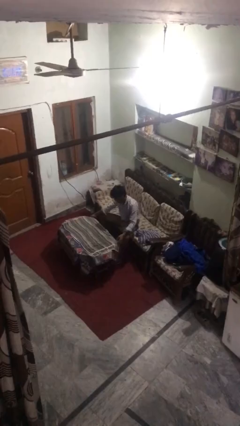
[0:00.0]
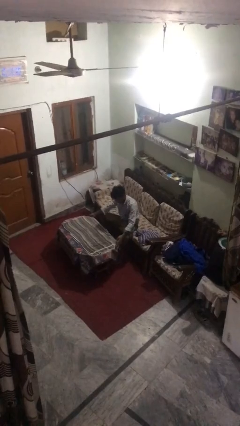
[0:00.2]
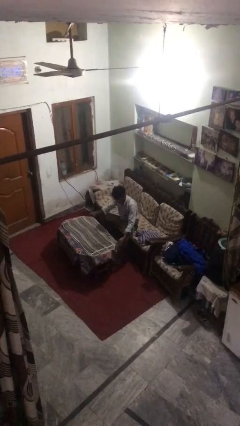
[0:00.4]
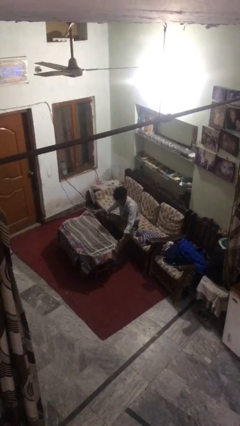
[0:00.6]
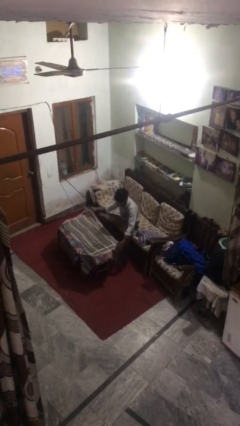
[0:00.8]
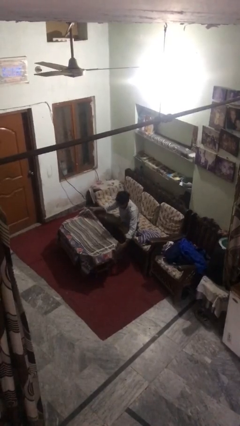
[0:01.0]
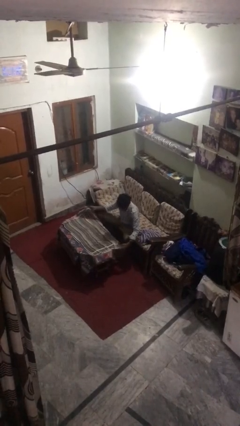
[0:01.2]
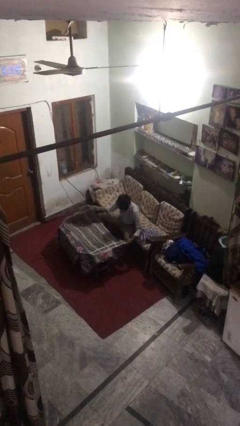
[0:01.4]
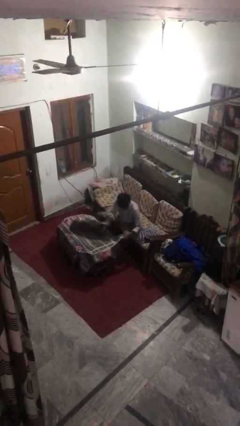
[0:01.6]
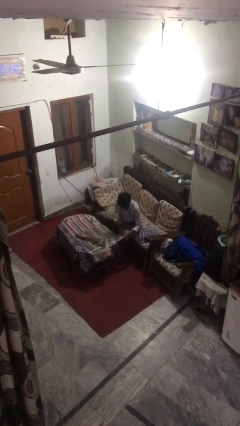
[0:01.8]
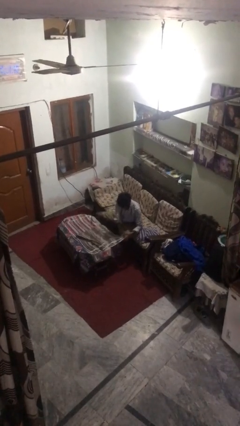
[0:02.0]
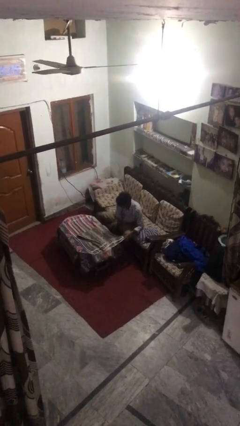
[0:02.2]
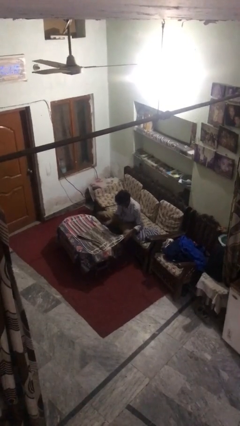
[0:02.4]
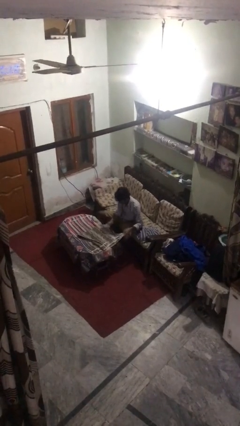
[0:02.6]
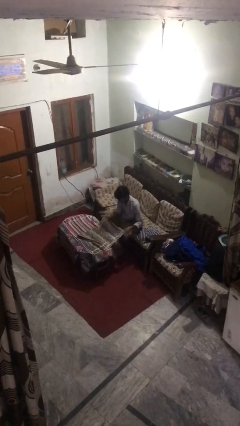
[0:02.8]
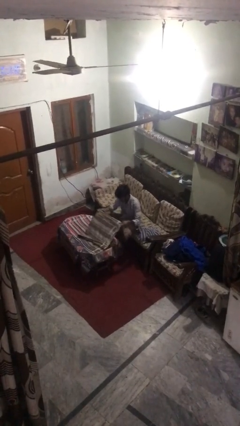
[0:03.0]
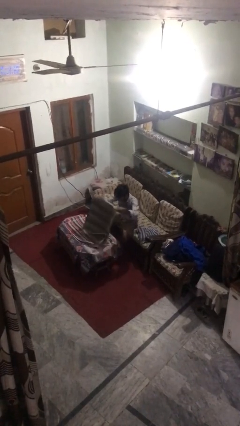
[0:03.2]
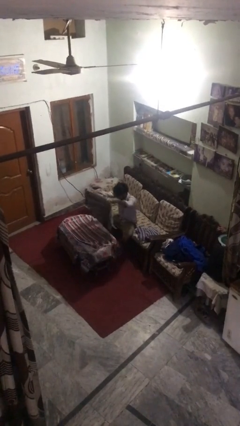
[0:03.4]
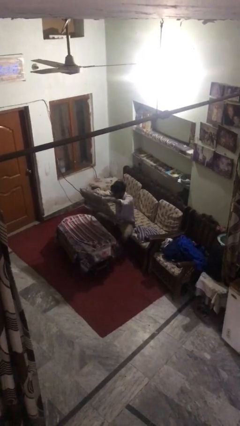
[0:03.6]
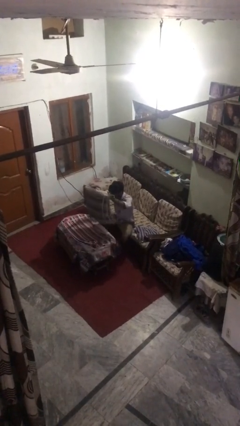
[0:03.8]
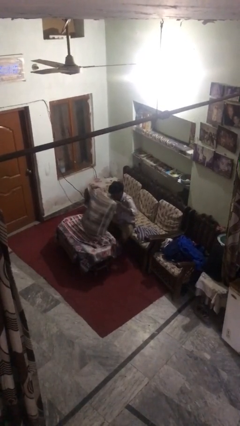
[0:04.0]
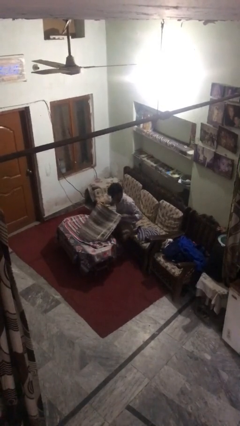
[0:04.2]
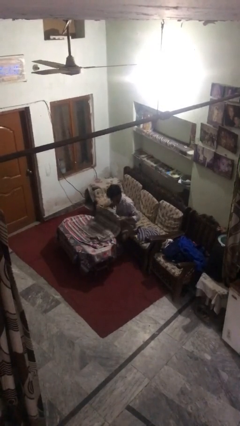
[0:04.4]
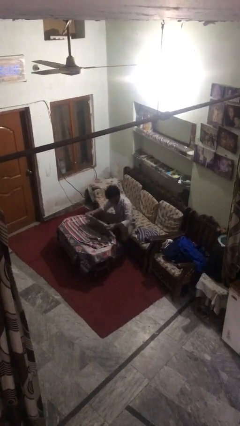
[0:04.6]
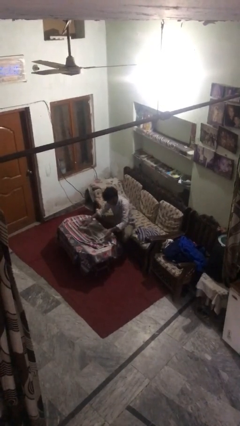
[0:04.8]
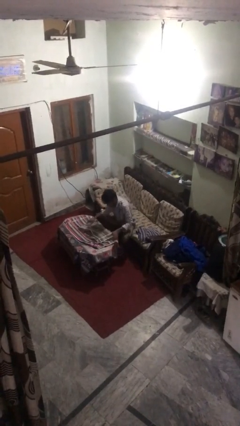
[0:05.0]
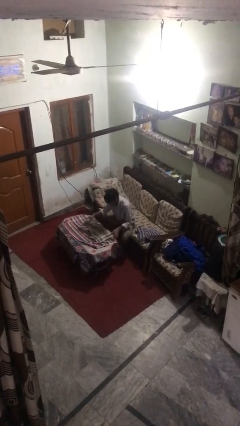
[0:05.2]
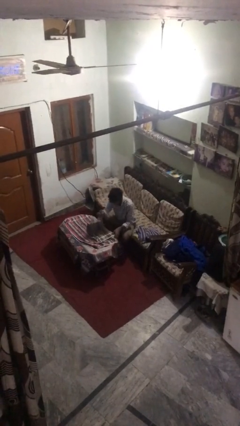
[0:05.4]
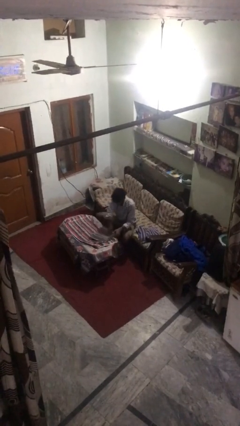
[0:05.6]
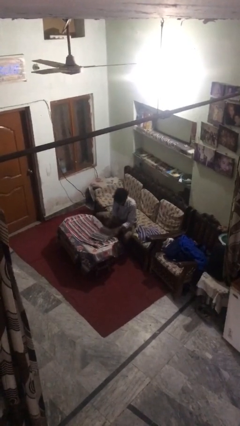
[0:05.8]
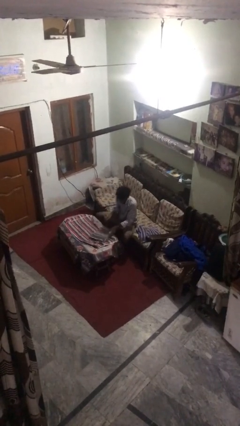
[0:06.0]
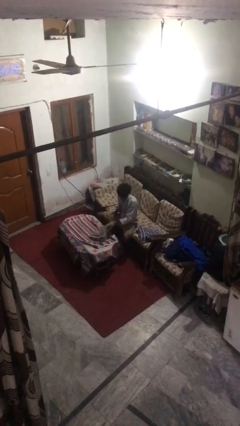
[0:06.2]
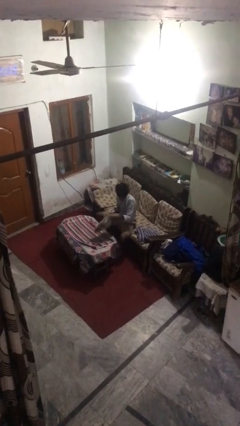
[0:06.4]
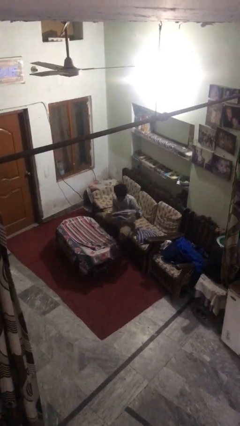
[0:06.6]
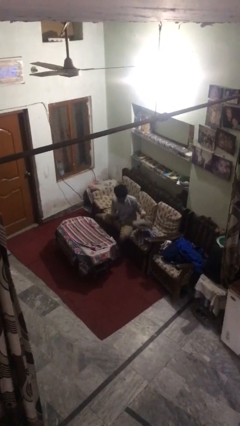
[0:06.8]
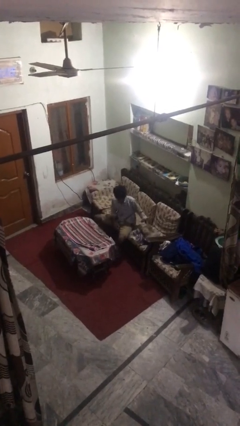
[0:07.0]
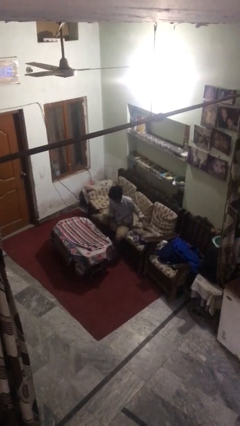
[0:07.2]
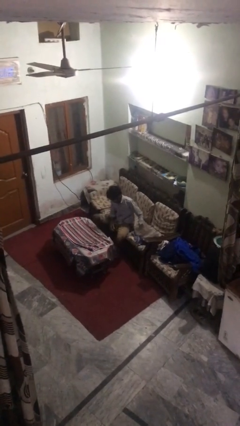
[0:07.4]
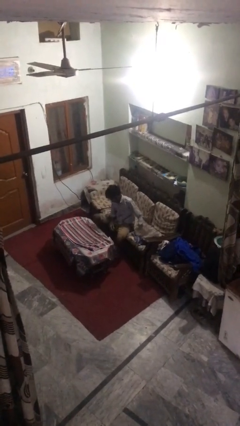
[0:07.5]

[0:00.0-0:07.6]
person folds towel

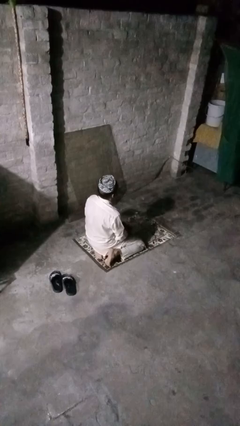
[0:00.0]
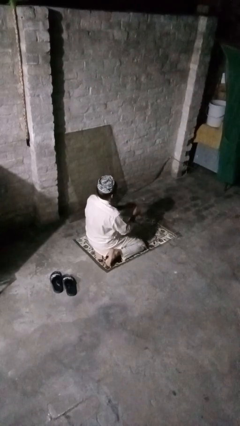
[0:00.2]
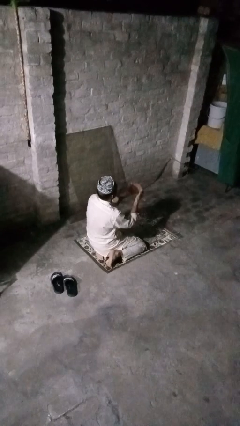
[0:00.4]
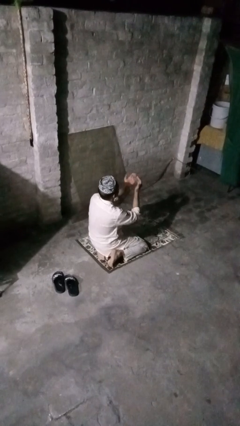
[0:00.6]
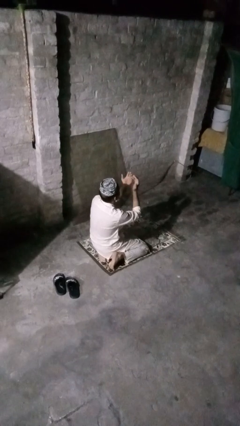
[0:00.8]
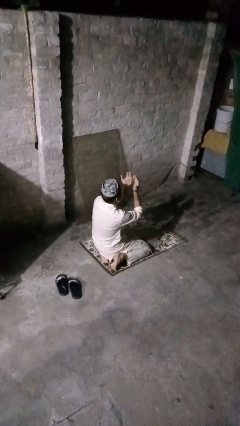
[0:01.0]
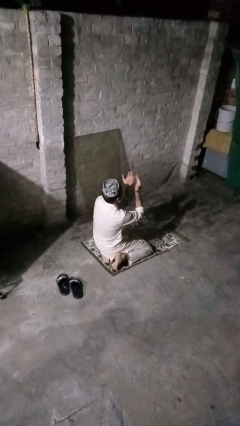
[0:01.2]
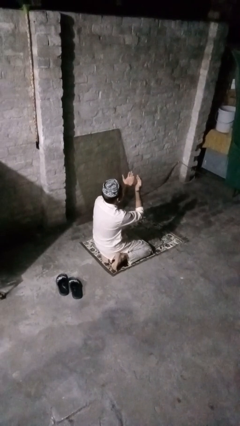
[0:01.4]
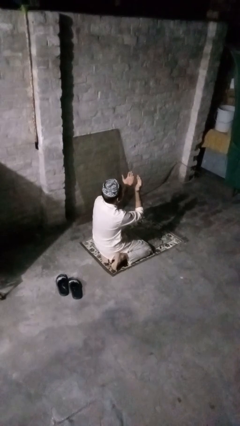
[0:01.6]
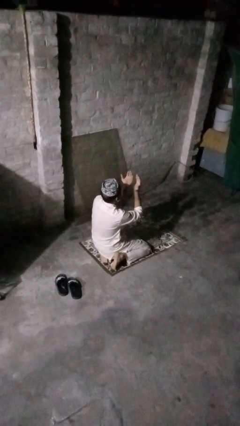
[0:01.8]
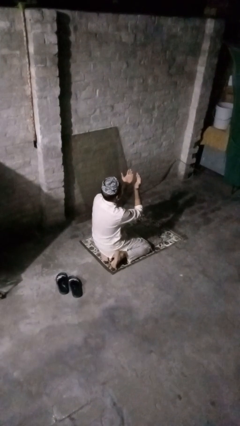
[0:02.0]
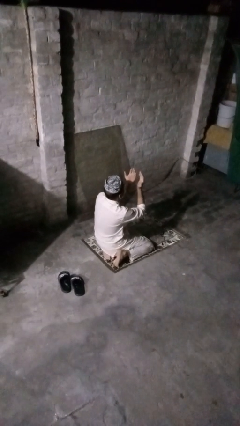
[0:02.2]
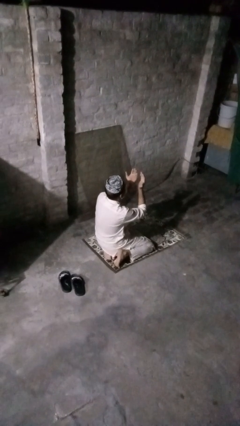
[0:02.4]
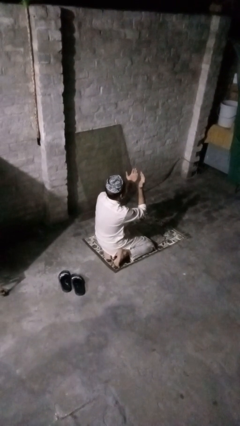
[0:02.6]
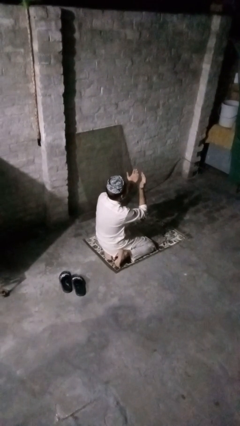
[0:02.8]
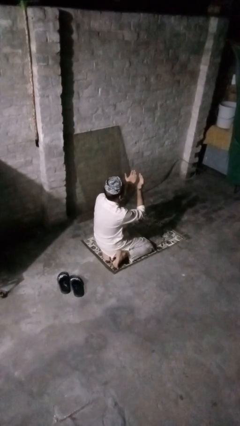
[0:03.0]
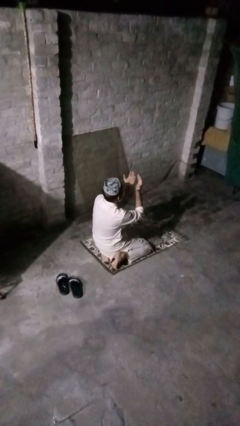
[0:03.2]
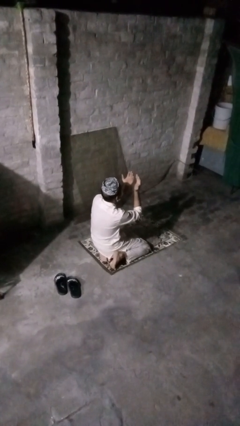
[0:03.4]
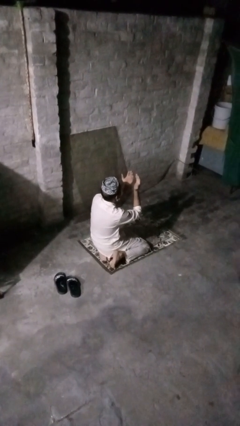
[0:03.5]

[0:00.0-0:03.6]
person prays

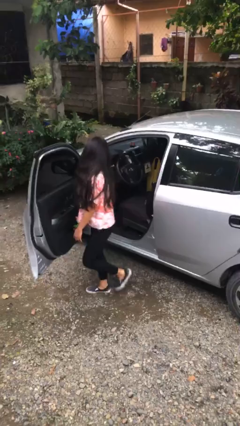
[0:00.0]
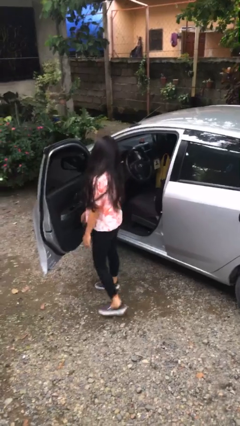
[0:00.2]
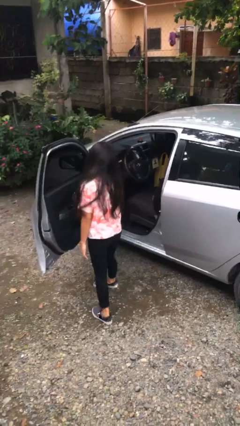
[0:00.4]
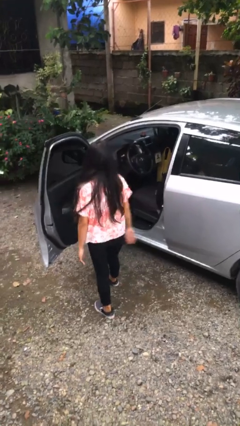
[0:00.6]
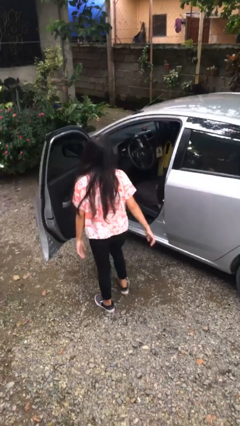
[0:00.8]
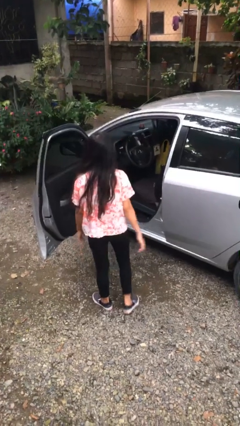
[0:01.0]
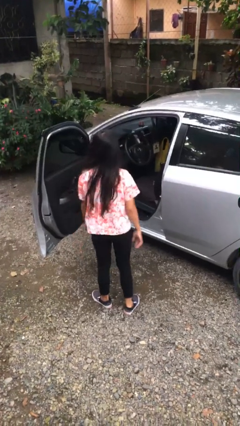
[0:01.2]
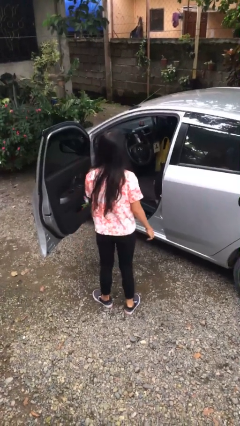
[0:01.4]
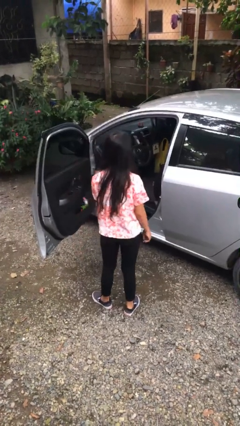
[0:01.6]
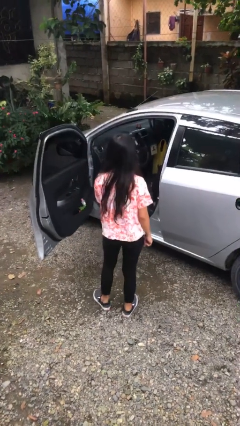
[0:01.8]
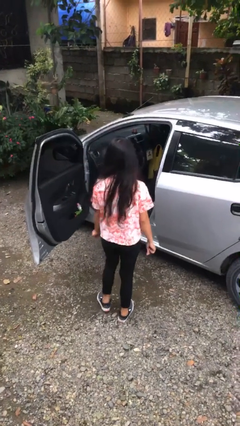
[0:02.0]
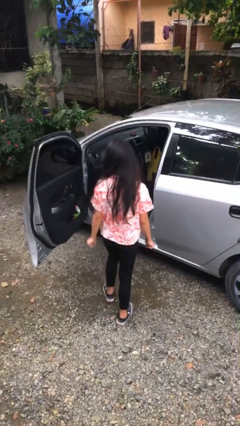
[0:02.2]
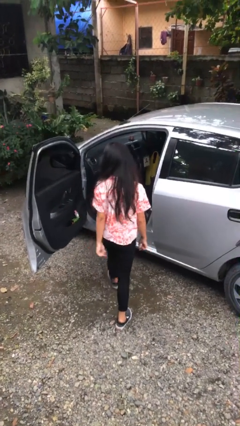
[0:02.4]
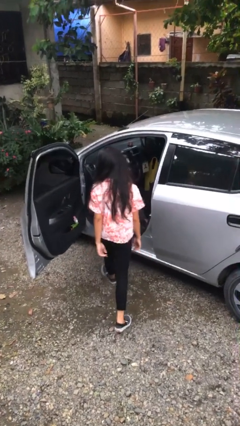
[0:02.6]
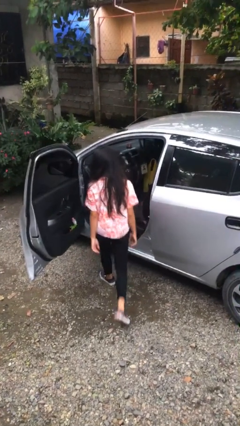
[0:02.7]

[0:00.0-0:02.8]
person exits car

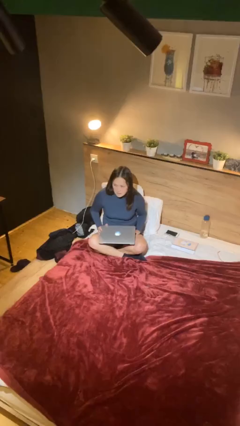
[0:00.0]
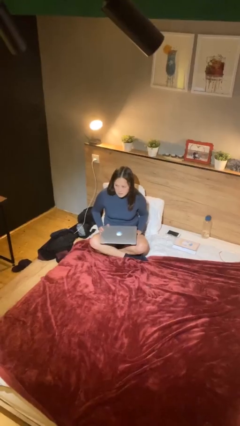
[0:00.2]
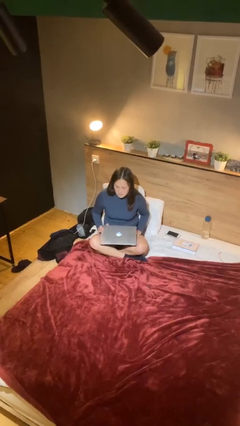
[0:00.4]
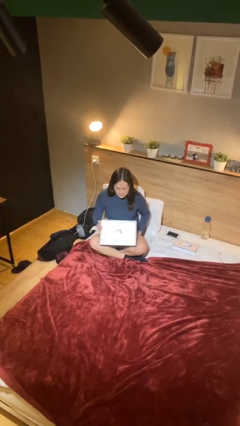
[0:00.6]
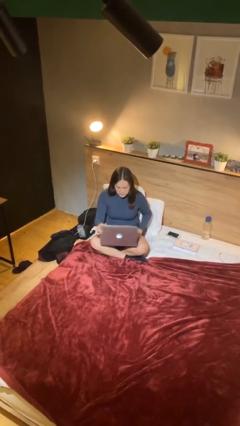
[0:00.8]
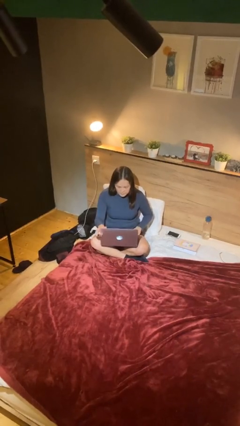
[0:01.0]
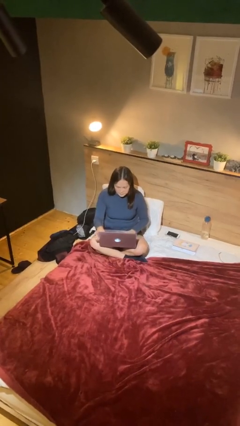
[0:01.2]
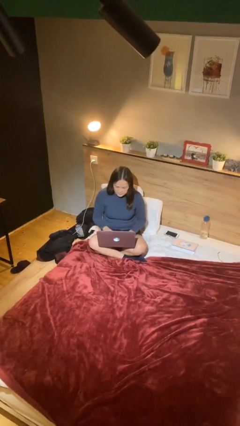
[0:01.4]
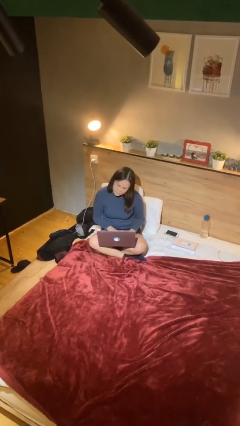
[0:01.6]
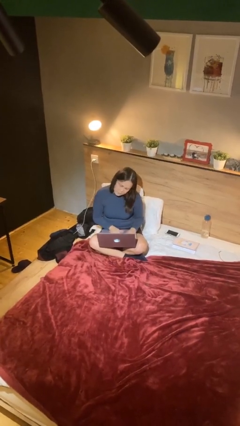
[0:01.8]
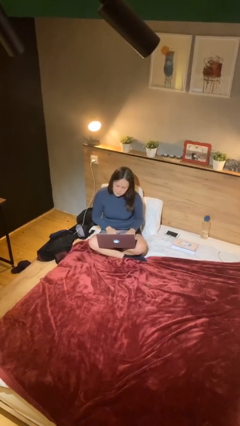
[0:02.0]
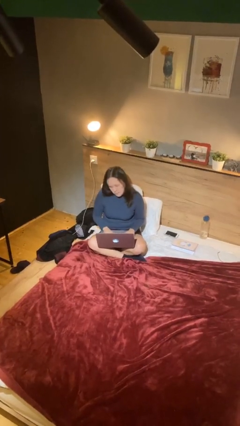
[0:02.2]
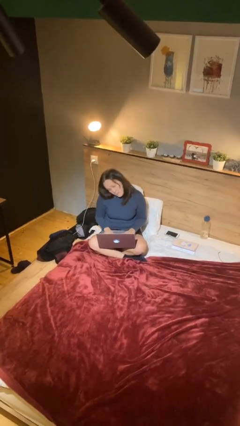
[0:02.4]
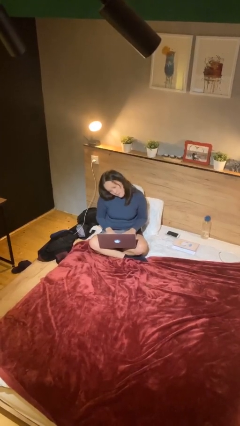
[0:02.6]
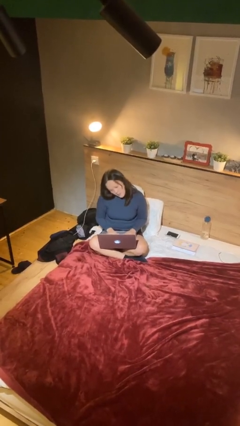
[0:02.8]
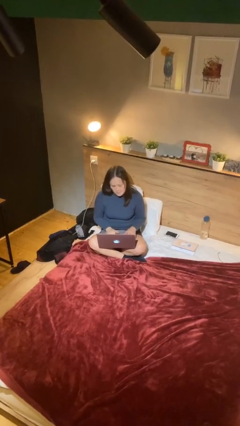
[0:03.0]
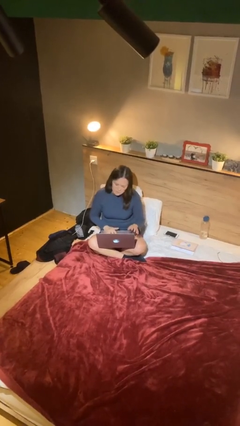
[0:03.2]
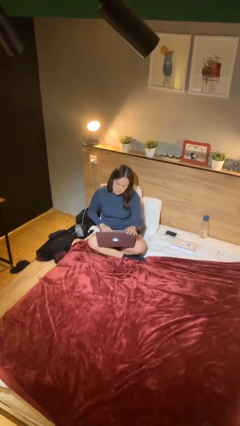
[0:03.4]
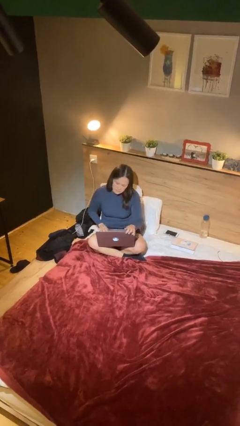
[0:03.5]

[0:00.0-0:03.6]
person interacts with laptop
